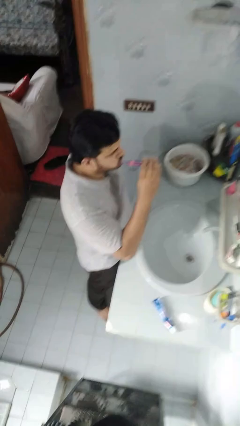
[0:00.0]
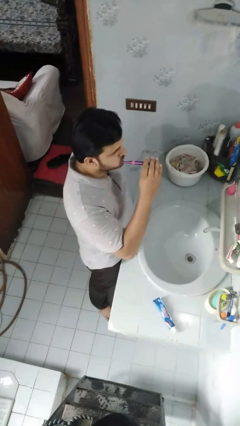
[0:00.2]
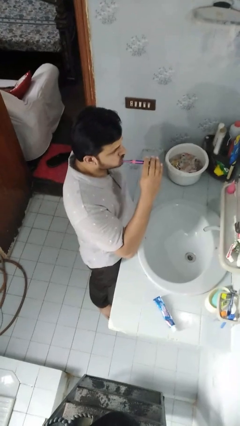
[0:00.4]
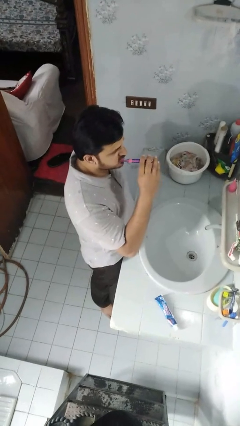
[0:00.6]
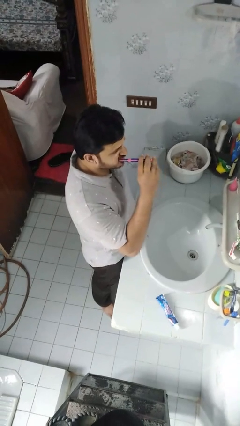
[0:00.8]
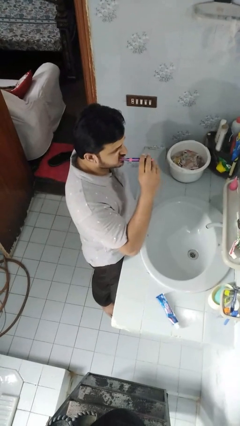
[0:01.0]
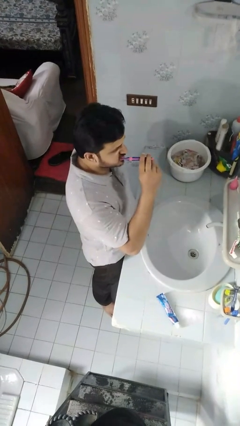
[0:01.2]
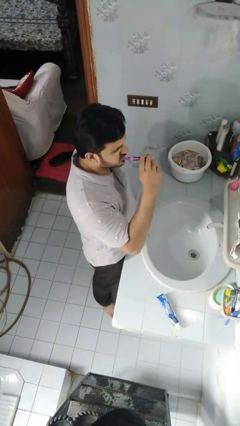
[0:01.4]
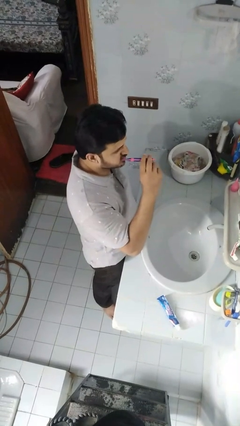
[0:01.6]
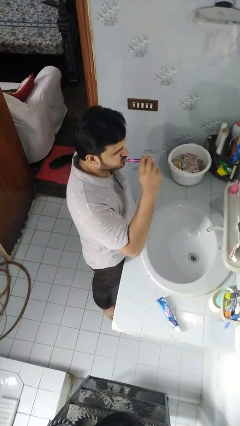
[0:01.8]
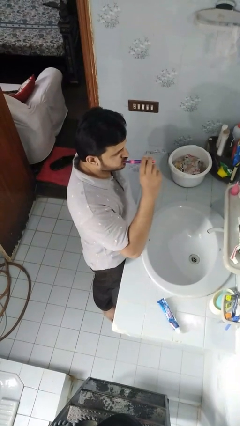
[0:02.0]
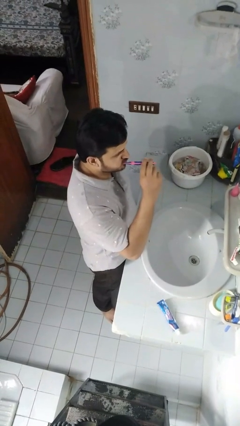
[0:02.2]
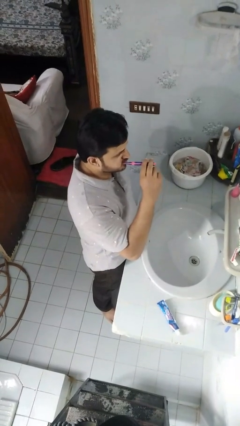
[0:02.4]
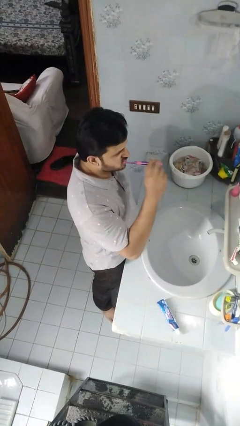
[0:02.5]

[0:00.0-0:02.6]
person brushes teeth

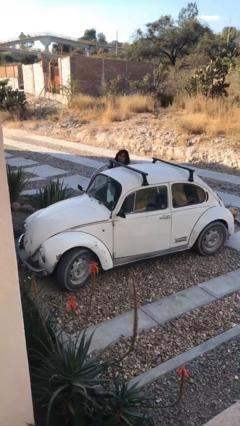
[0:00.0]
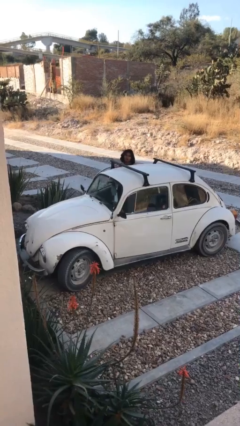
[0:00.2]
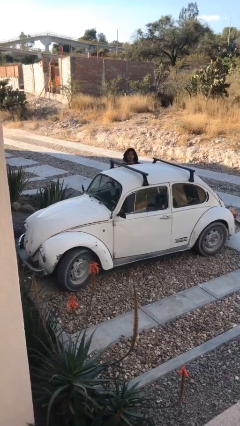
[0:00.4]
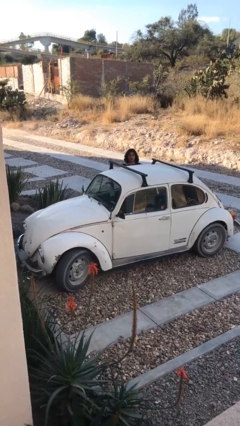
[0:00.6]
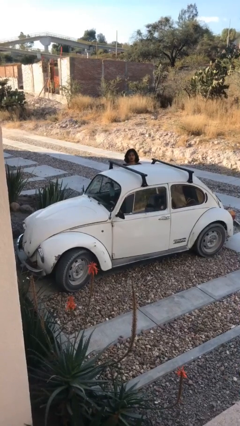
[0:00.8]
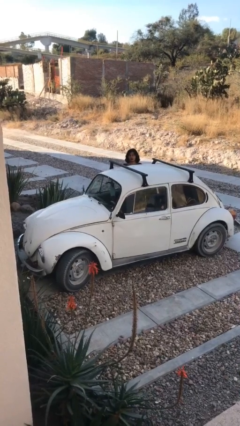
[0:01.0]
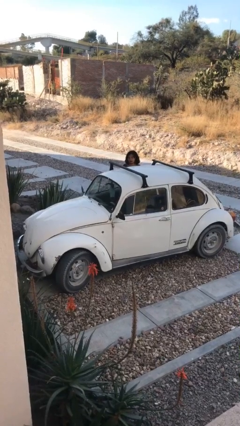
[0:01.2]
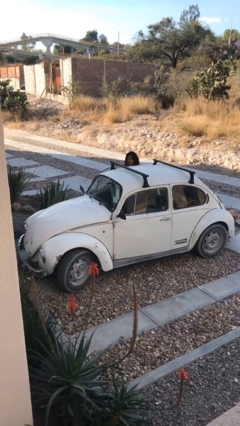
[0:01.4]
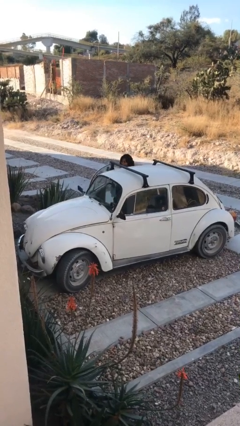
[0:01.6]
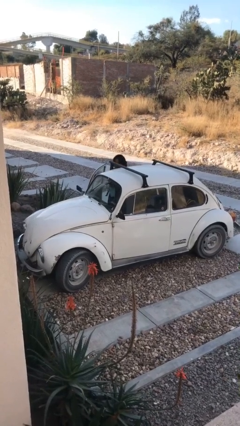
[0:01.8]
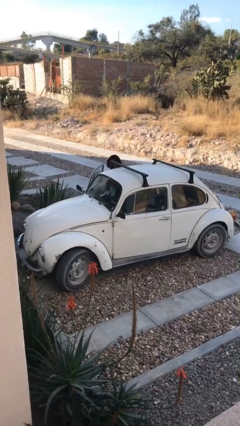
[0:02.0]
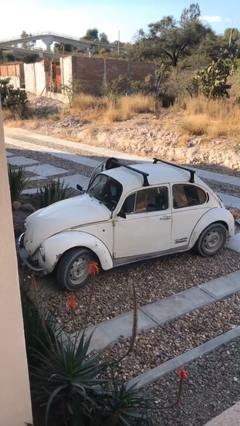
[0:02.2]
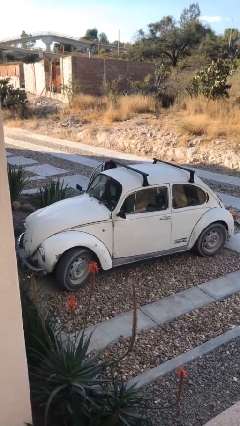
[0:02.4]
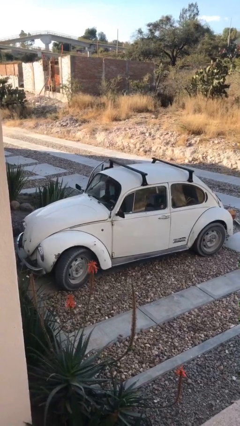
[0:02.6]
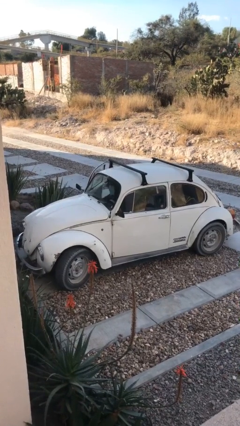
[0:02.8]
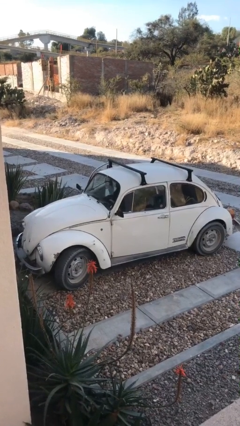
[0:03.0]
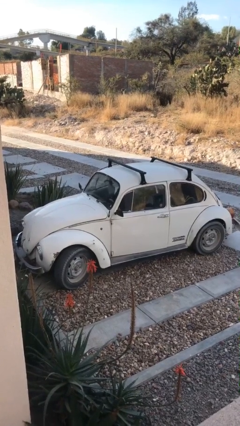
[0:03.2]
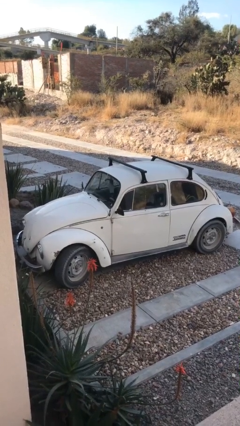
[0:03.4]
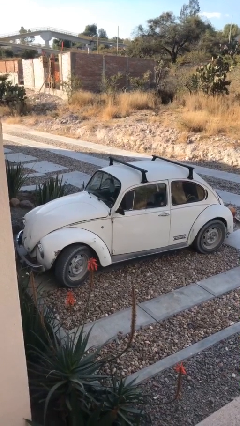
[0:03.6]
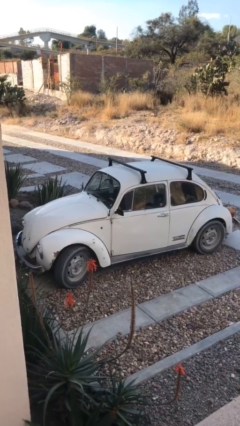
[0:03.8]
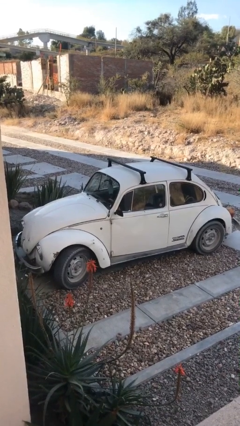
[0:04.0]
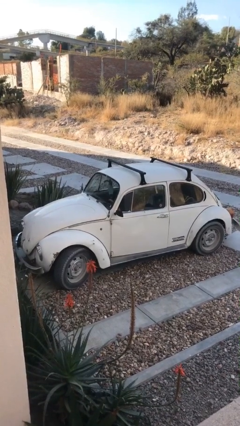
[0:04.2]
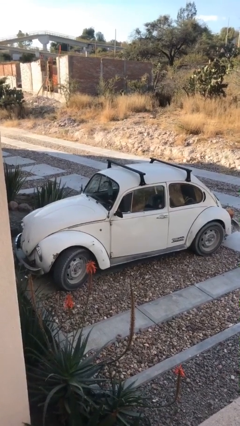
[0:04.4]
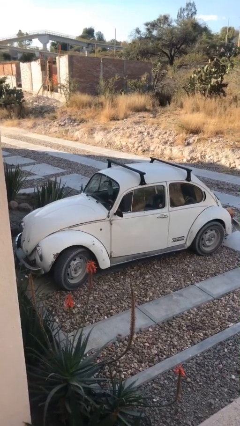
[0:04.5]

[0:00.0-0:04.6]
car picks up person

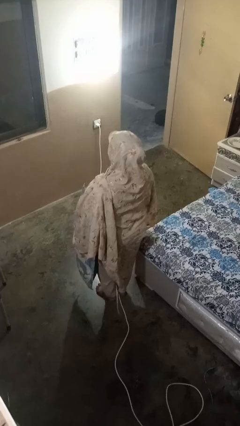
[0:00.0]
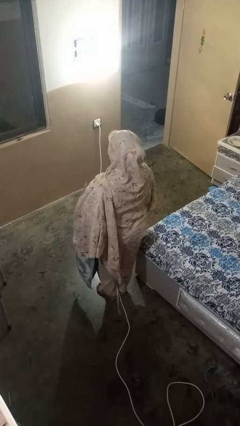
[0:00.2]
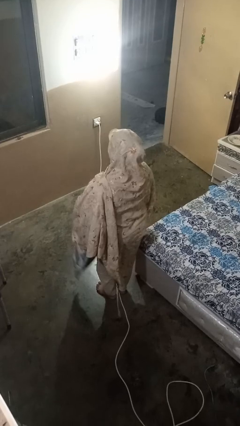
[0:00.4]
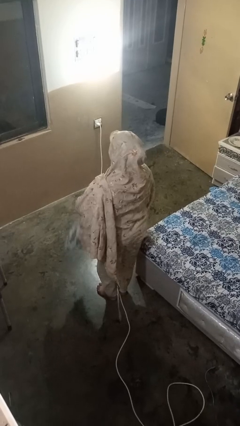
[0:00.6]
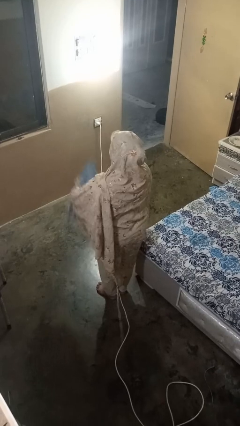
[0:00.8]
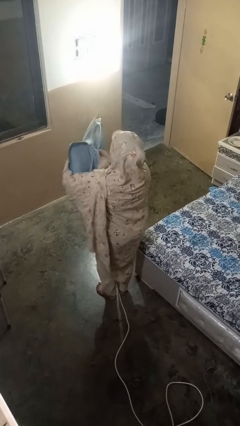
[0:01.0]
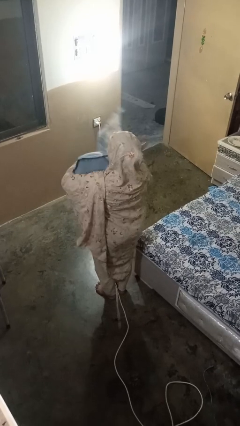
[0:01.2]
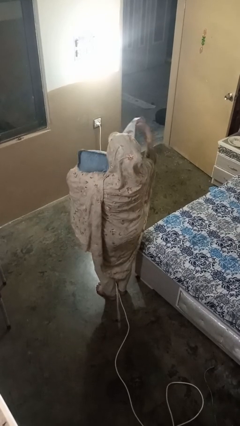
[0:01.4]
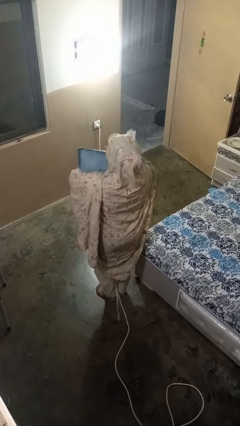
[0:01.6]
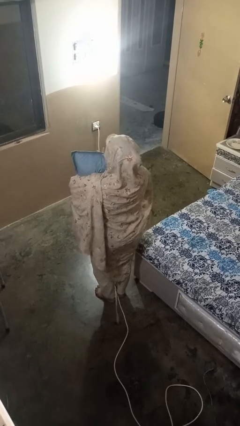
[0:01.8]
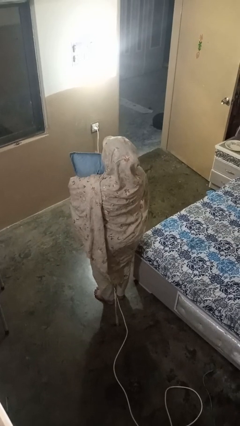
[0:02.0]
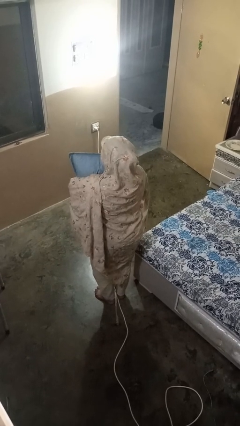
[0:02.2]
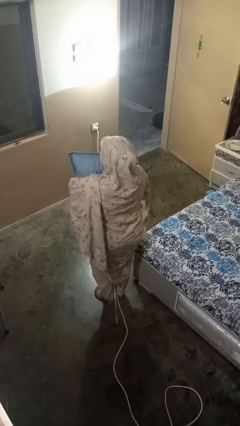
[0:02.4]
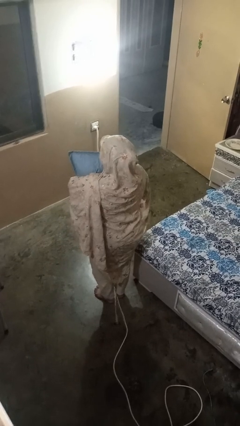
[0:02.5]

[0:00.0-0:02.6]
person squeezes object

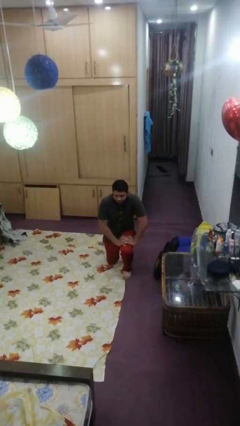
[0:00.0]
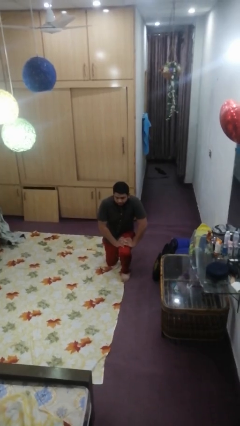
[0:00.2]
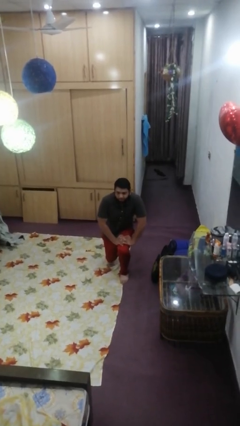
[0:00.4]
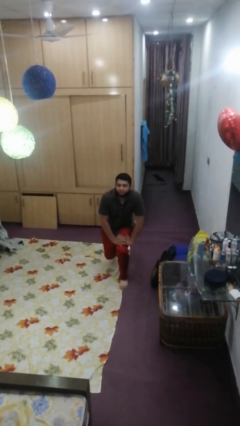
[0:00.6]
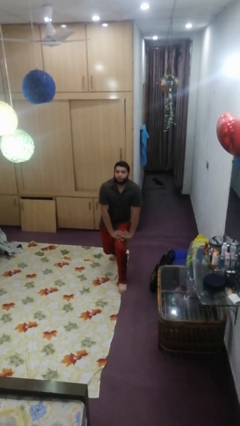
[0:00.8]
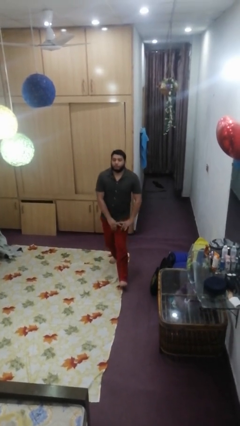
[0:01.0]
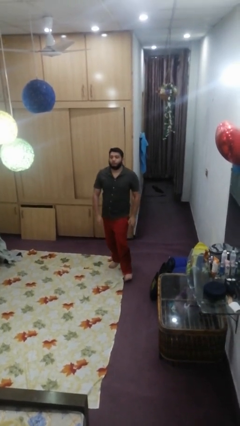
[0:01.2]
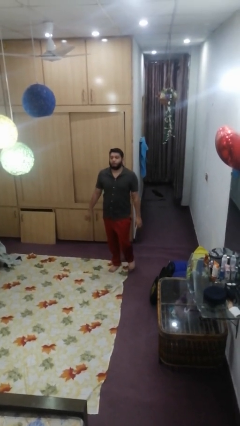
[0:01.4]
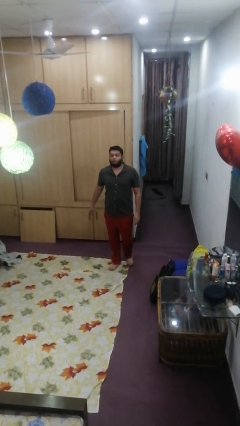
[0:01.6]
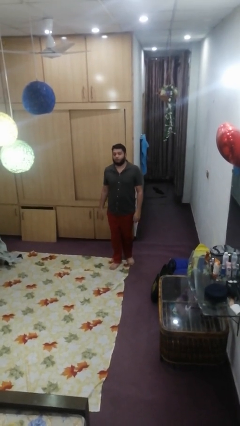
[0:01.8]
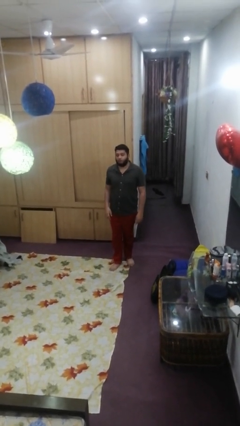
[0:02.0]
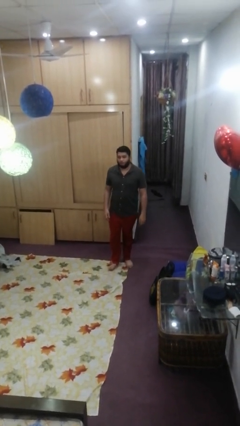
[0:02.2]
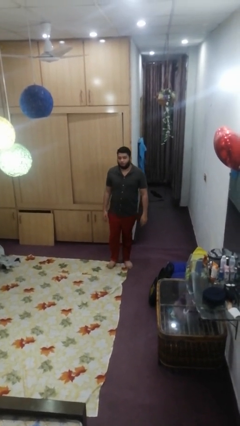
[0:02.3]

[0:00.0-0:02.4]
person stands up from floor

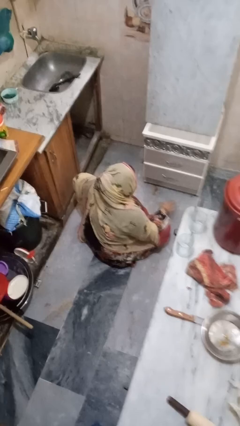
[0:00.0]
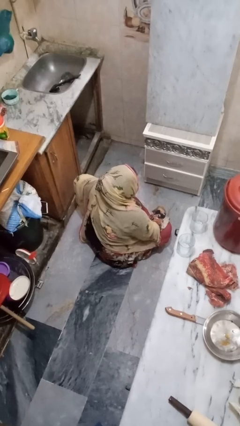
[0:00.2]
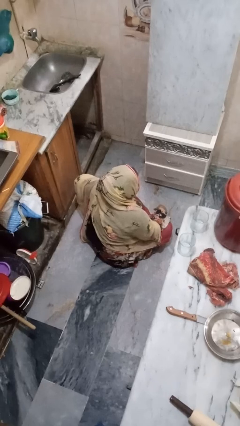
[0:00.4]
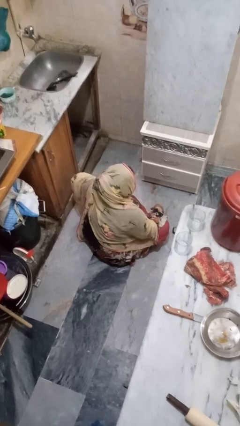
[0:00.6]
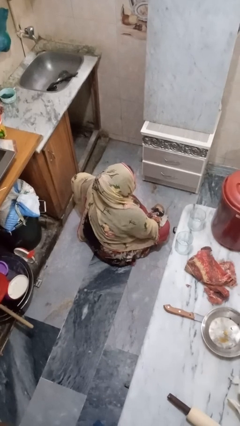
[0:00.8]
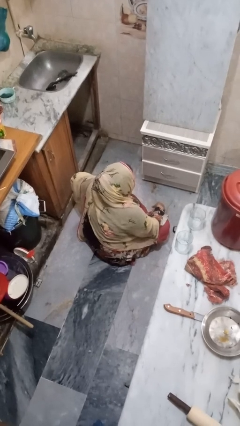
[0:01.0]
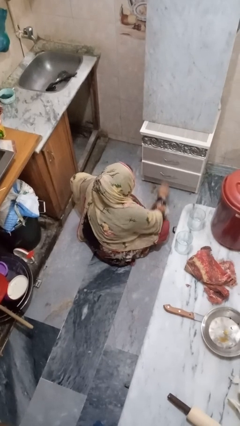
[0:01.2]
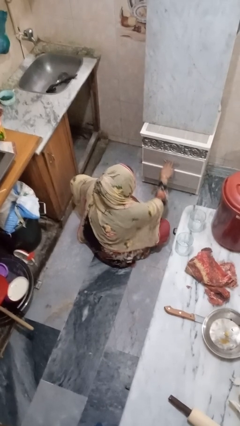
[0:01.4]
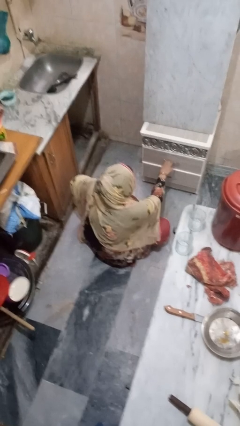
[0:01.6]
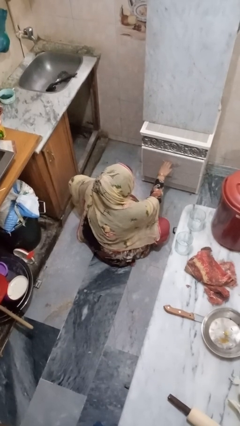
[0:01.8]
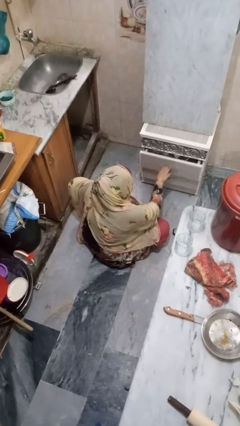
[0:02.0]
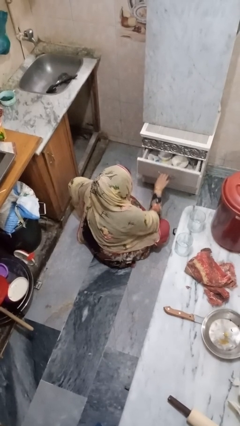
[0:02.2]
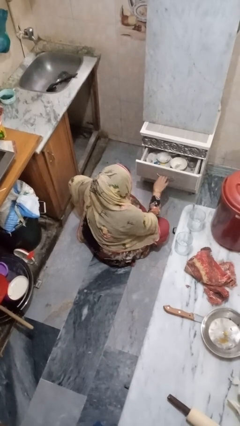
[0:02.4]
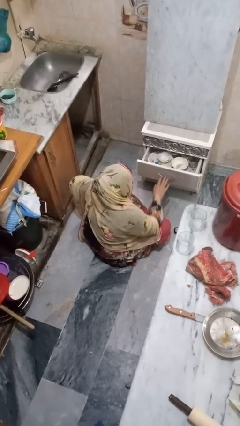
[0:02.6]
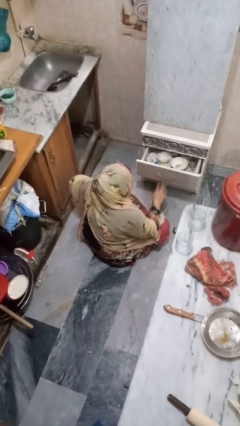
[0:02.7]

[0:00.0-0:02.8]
person opens kitchen drawer

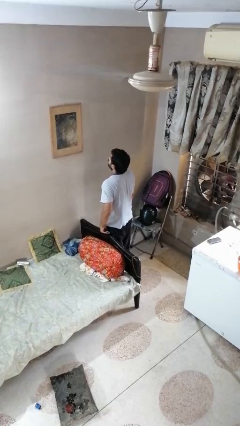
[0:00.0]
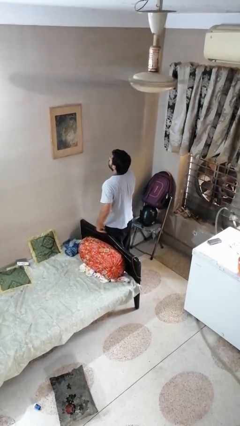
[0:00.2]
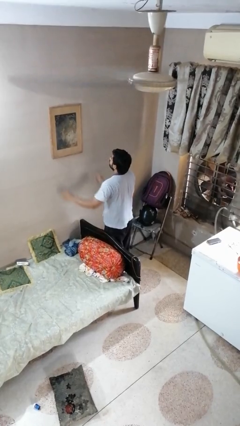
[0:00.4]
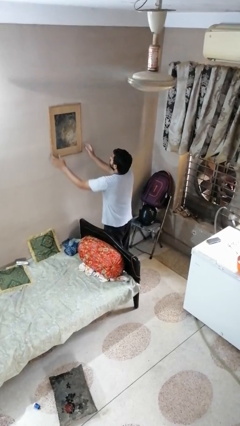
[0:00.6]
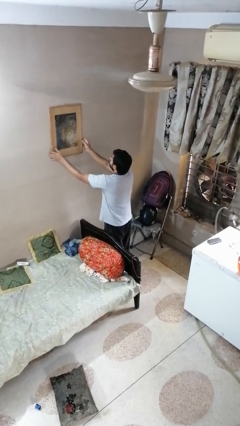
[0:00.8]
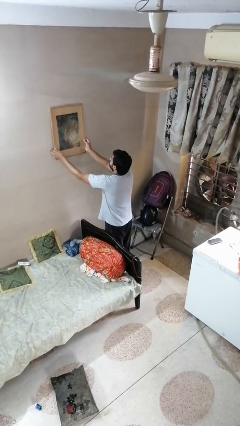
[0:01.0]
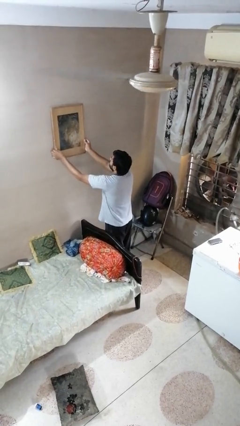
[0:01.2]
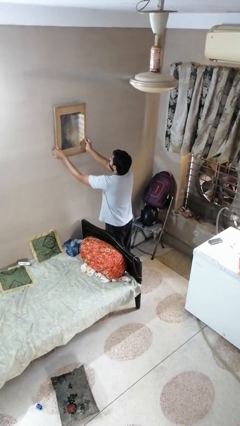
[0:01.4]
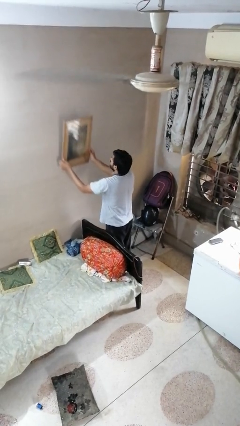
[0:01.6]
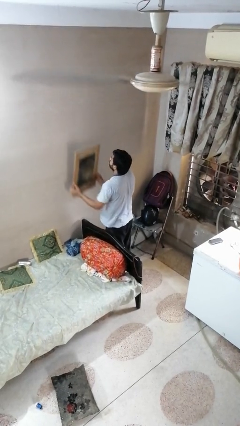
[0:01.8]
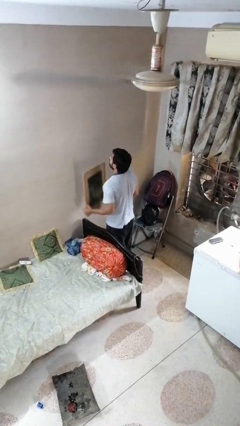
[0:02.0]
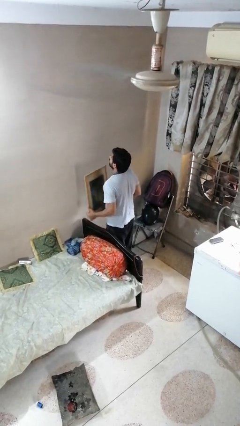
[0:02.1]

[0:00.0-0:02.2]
person takes down picture frame
